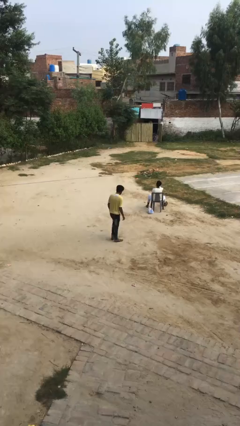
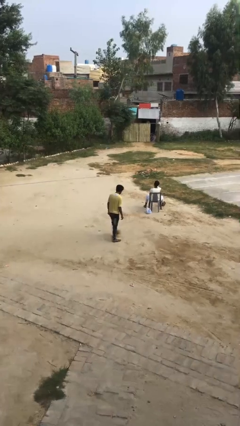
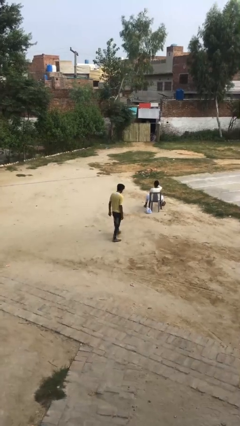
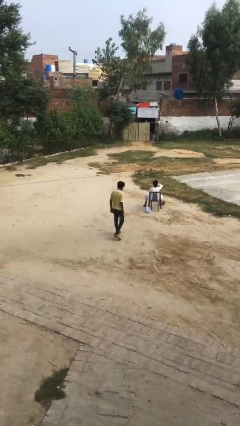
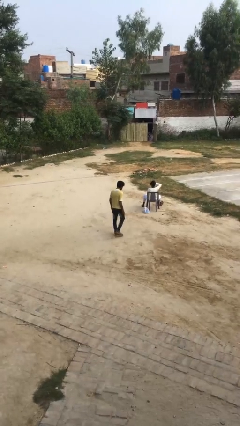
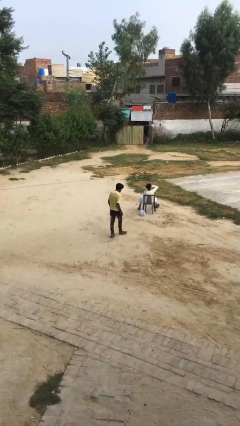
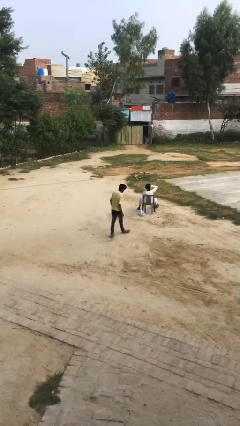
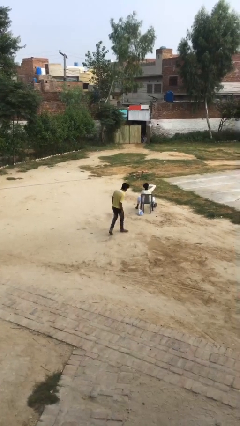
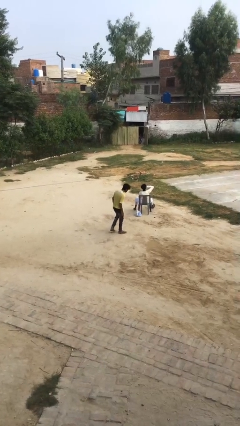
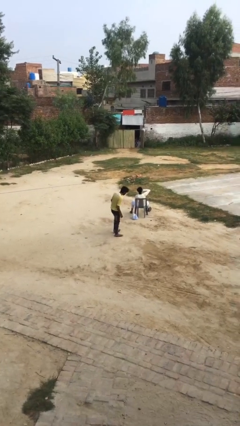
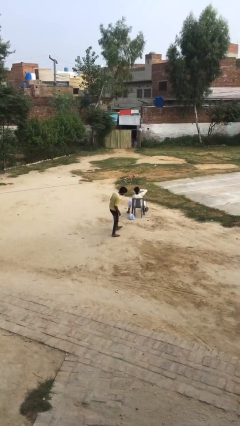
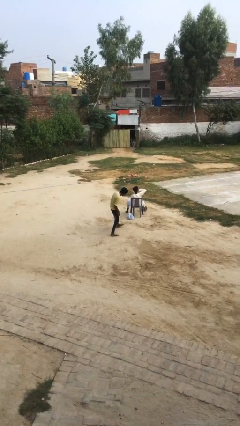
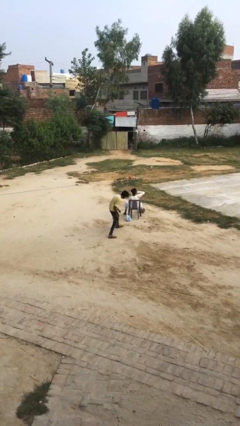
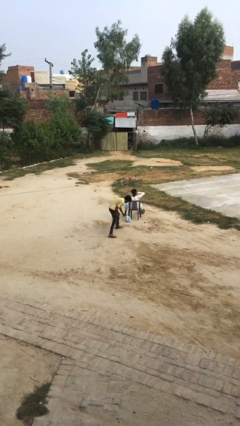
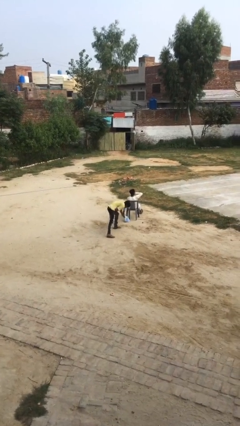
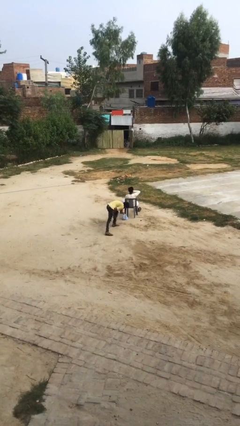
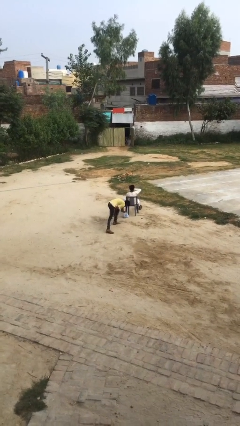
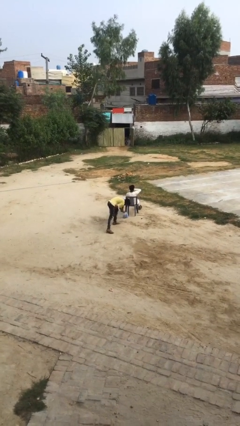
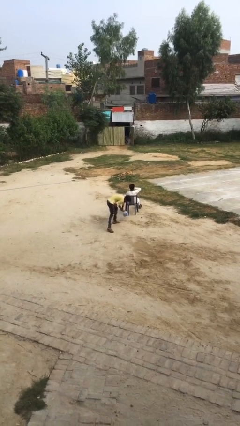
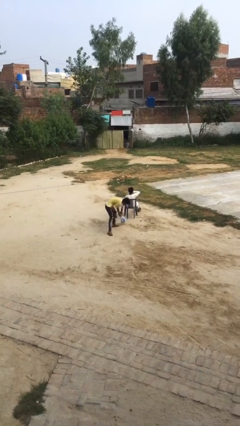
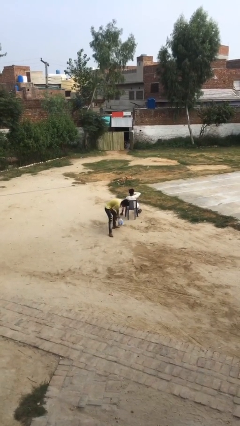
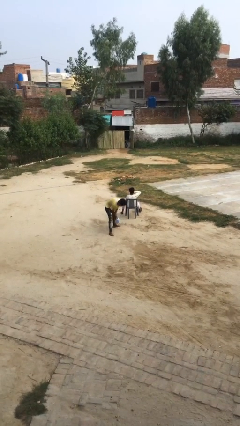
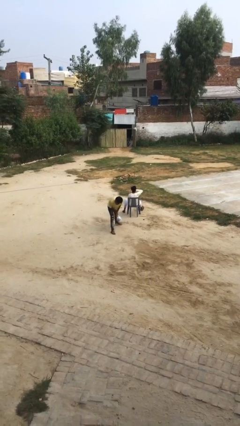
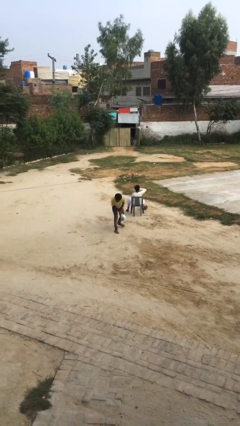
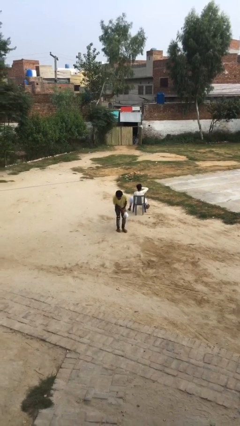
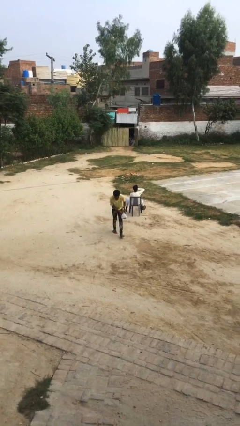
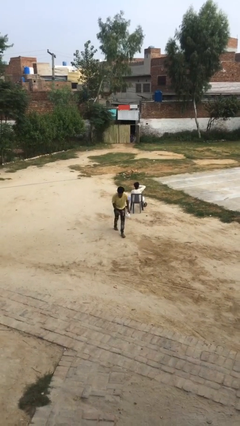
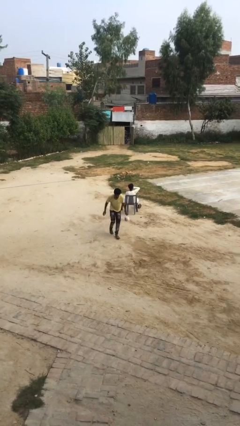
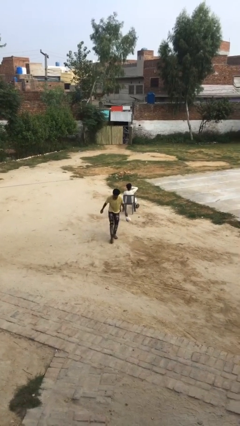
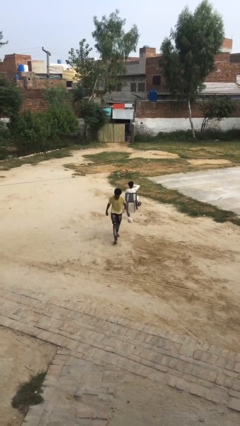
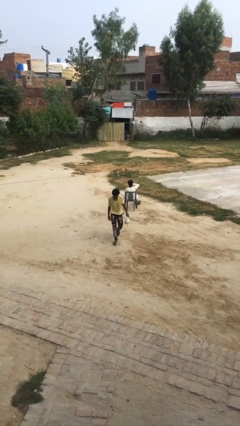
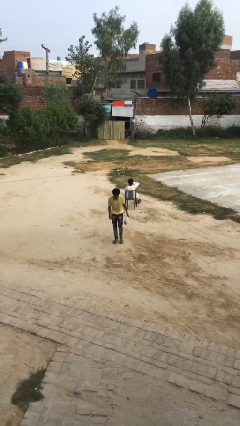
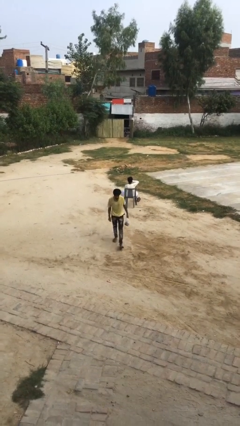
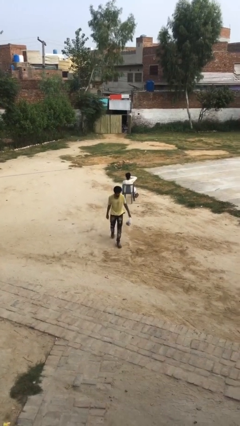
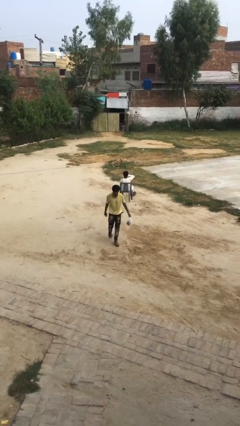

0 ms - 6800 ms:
person steals object from person

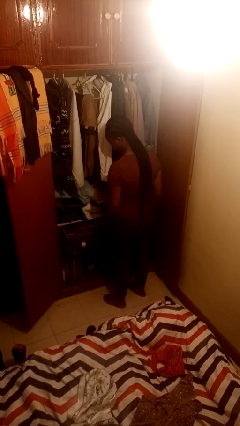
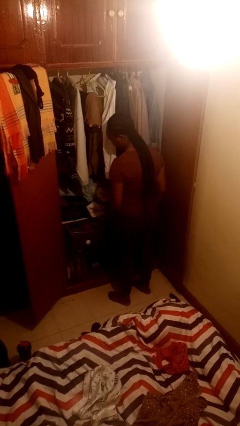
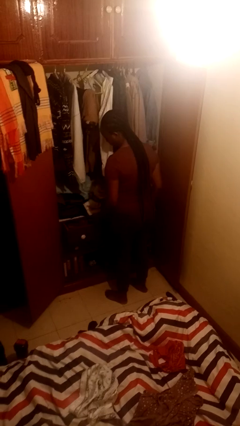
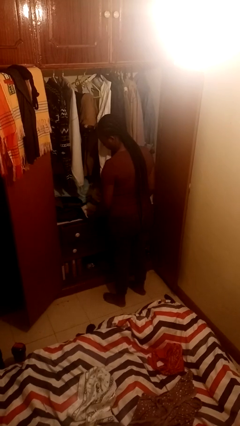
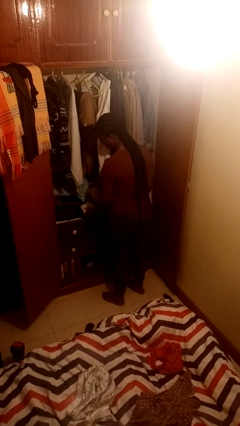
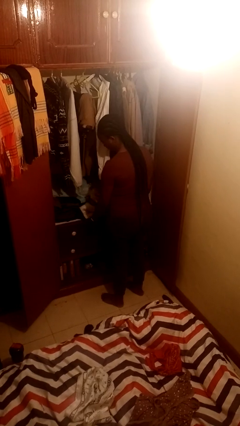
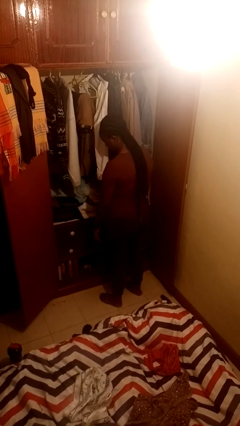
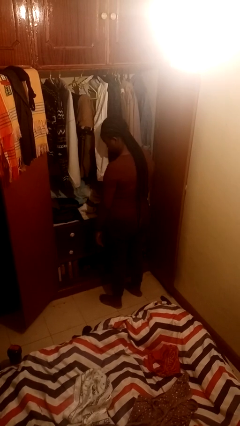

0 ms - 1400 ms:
person closes dresser drawer

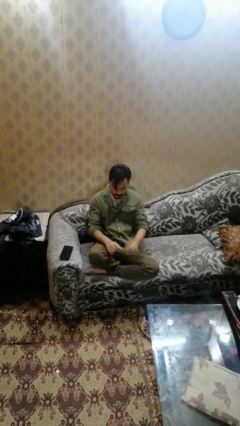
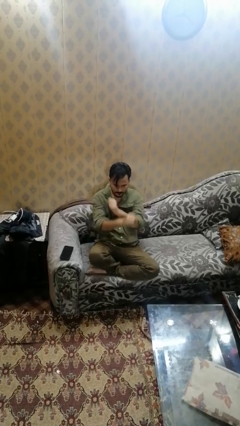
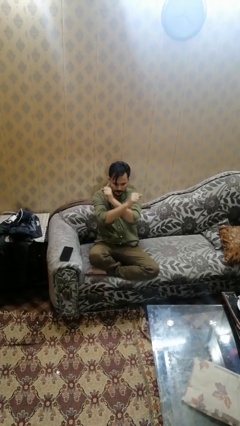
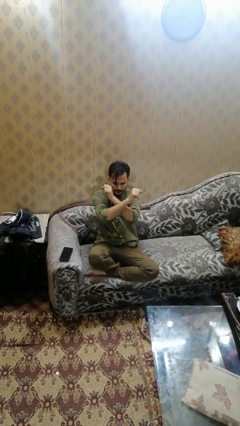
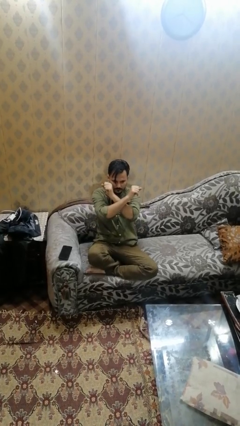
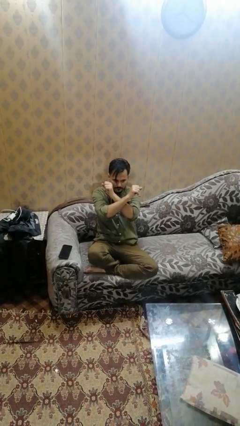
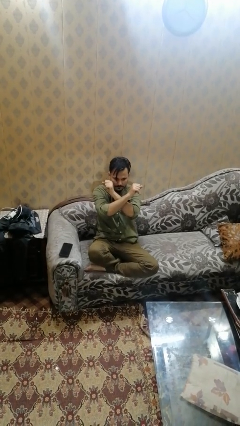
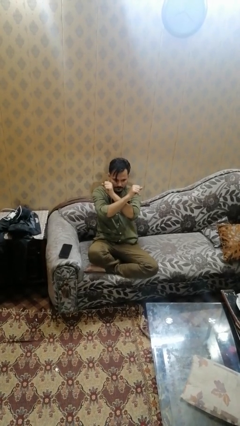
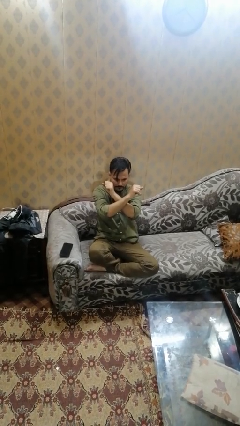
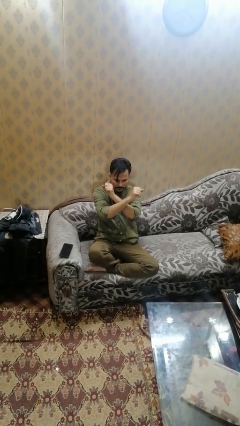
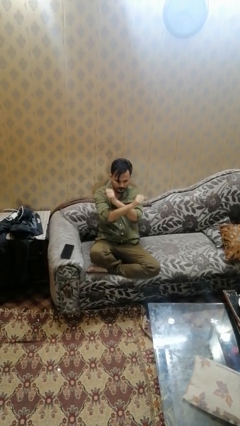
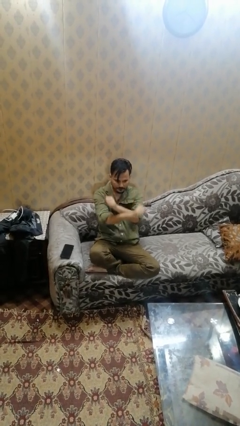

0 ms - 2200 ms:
person gestures arms x

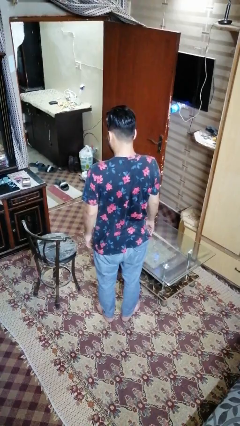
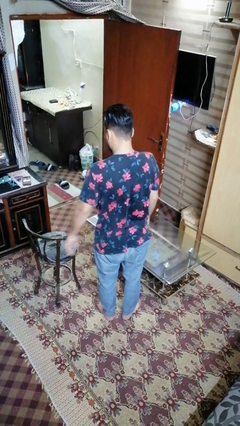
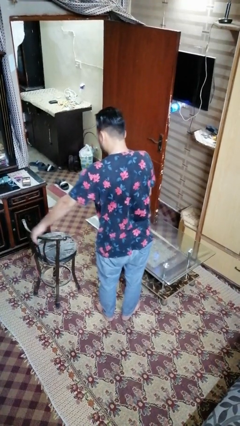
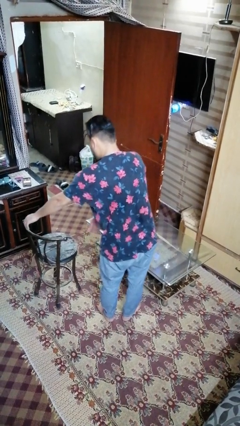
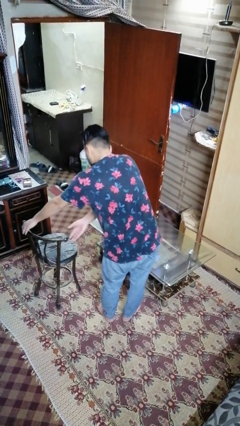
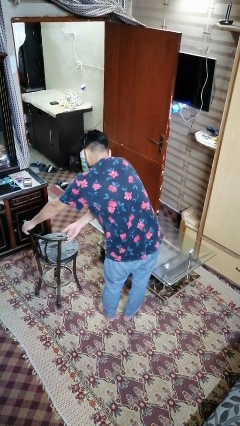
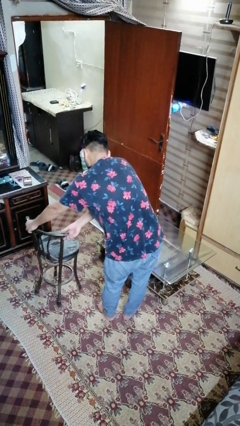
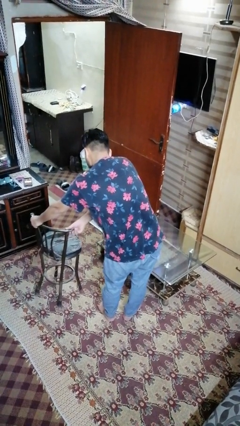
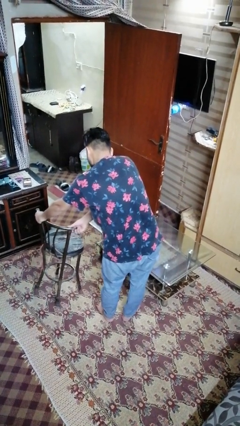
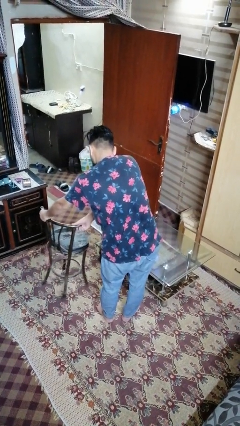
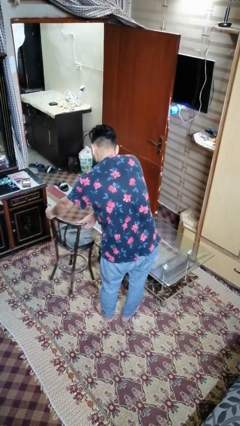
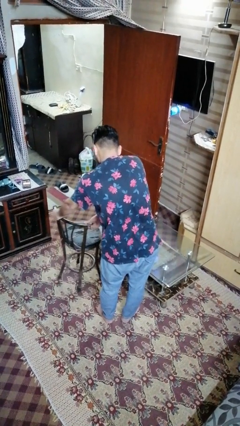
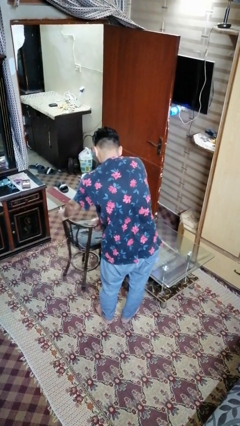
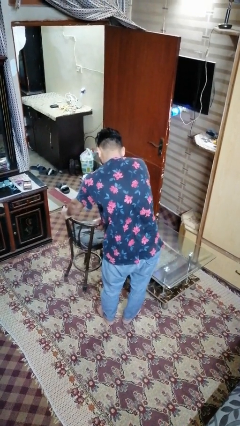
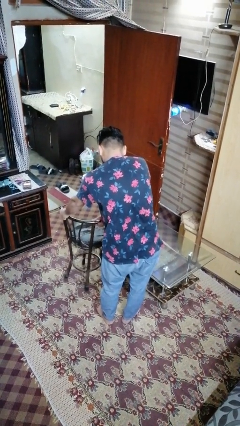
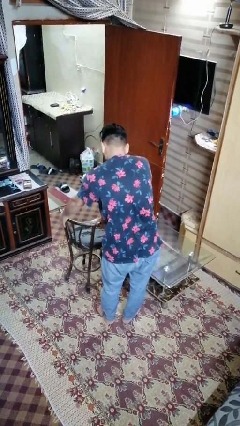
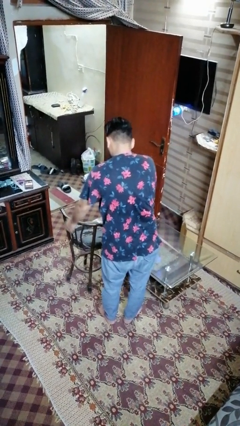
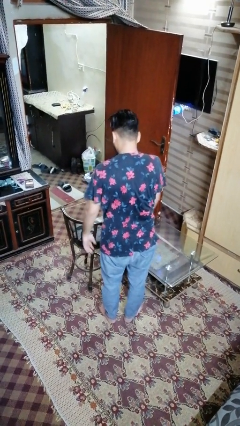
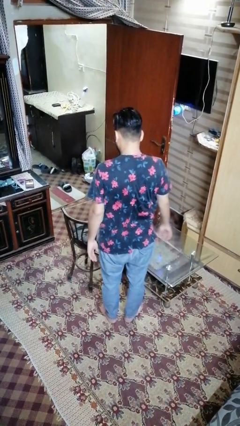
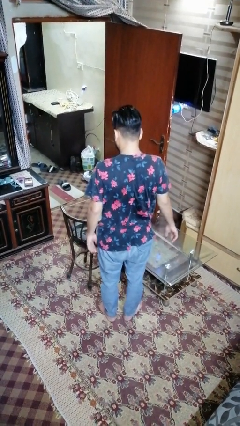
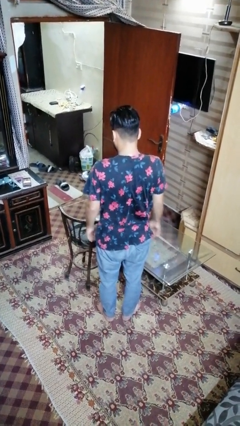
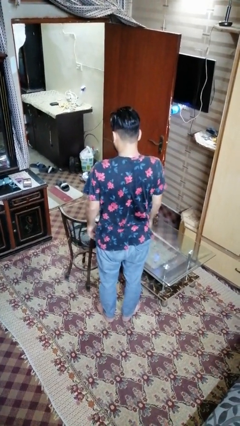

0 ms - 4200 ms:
person pushes in chair

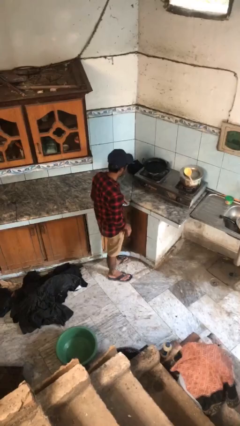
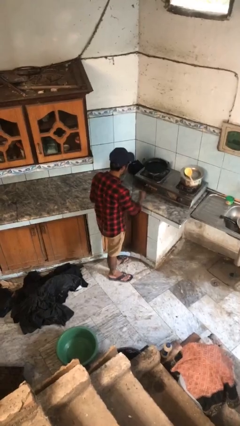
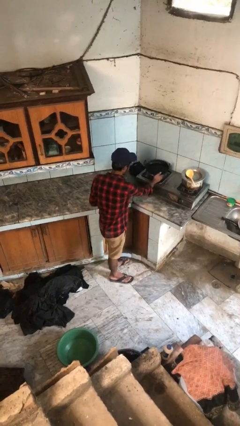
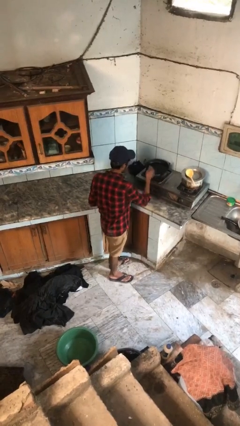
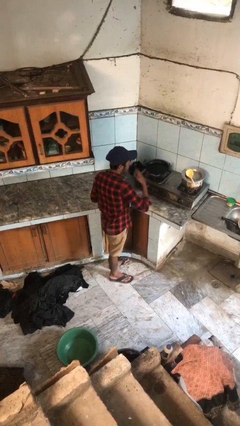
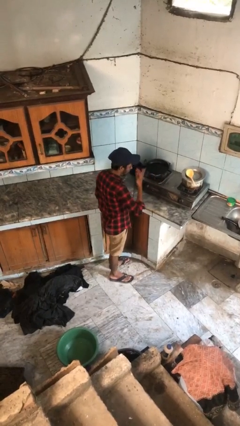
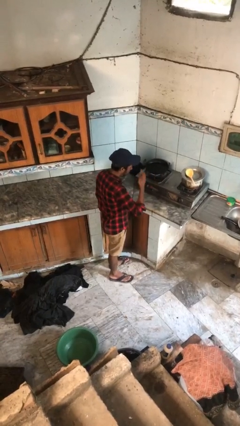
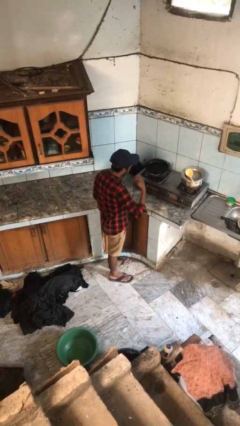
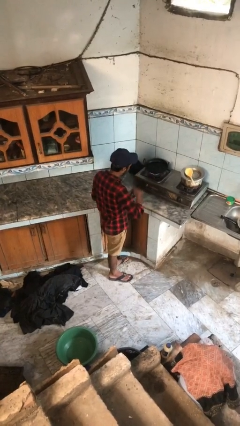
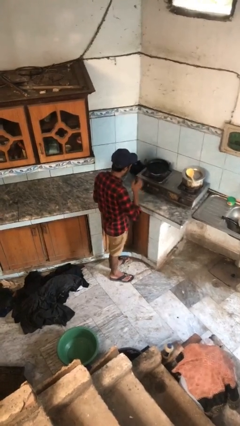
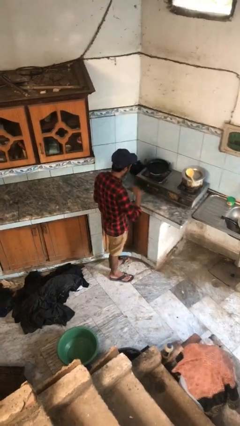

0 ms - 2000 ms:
person burns hand

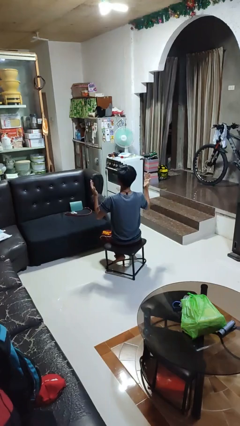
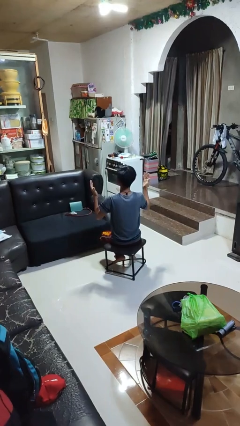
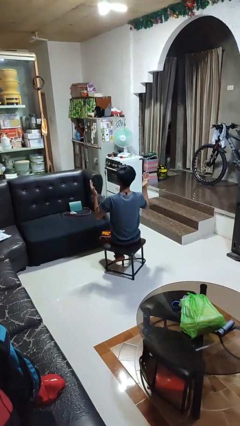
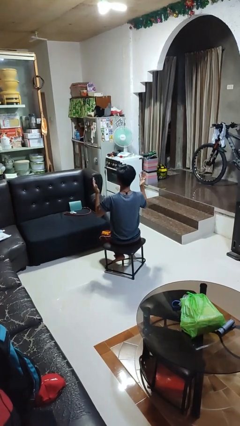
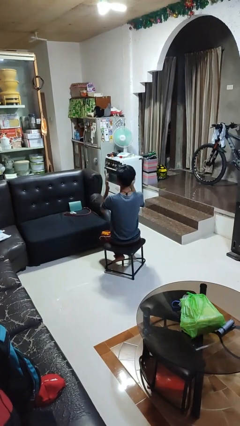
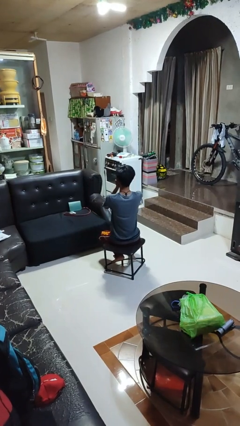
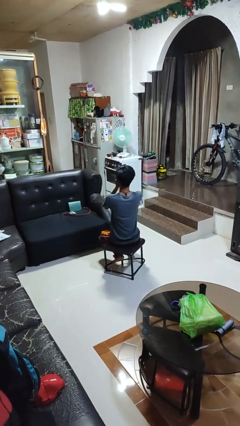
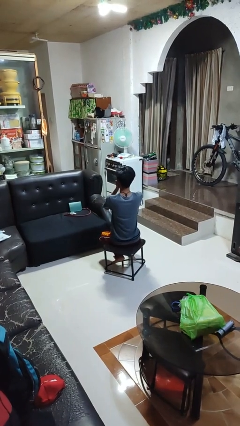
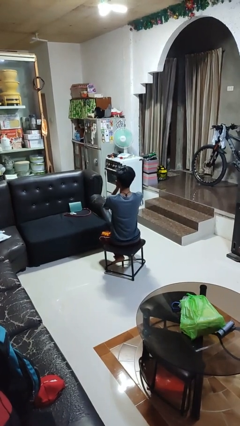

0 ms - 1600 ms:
person covers face with hands
